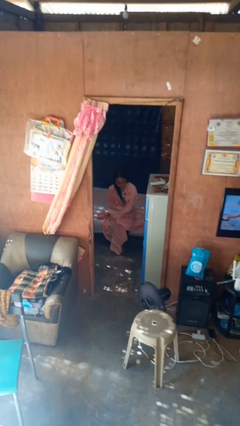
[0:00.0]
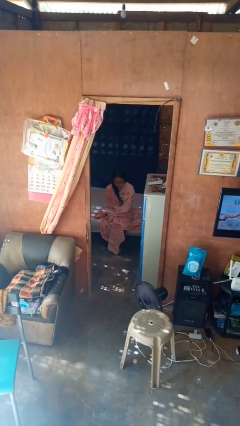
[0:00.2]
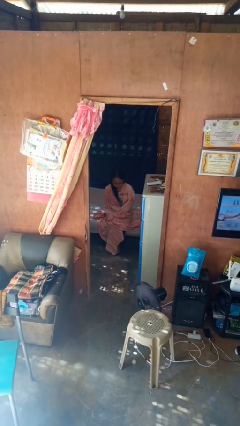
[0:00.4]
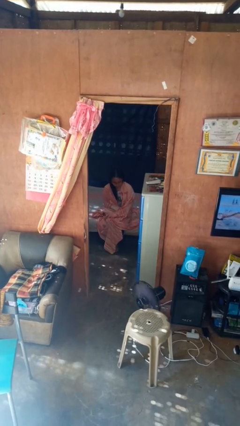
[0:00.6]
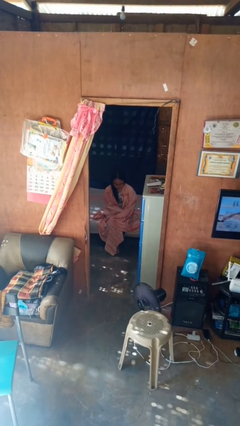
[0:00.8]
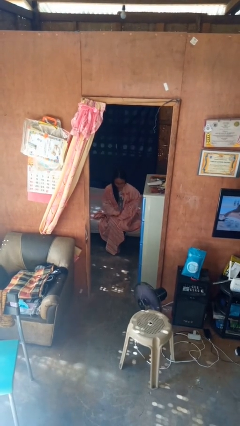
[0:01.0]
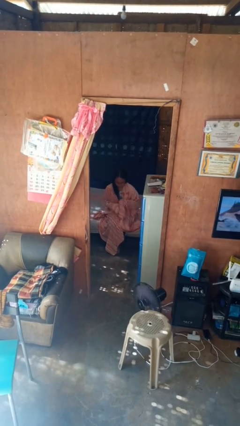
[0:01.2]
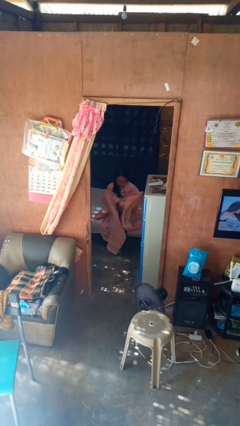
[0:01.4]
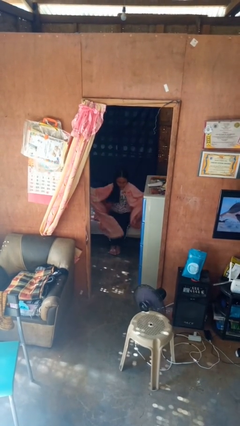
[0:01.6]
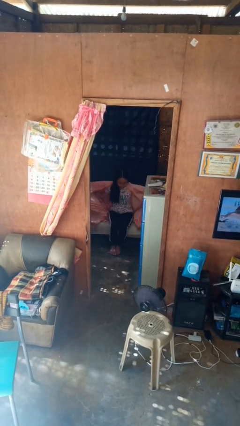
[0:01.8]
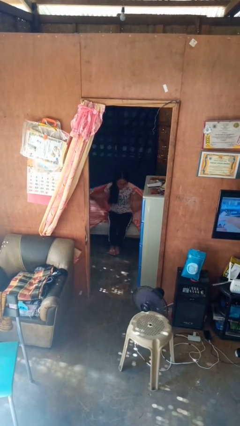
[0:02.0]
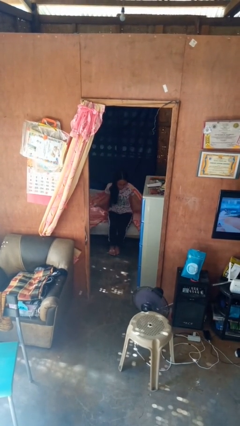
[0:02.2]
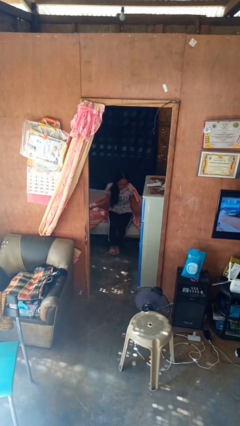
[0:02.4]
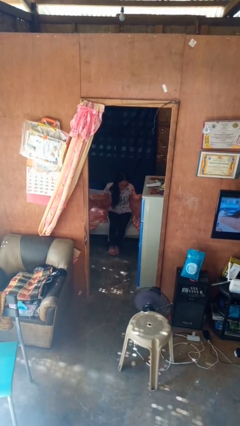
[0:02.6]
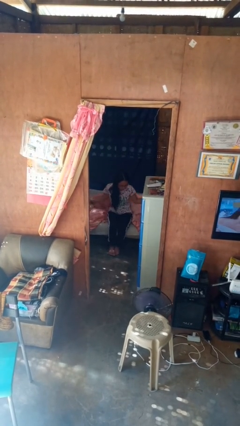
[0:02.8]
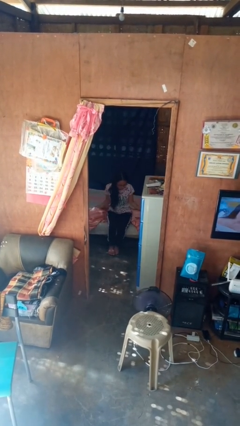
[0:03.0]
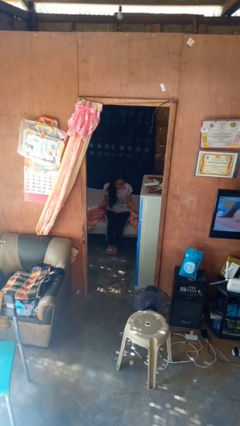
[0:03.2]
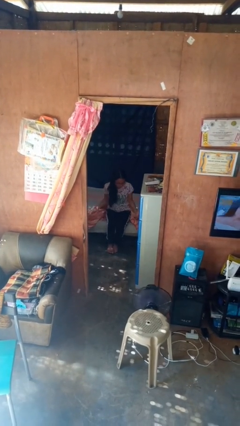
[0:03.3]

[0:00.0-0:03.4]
person uncovers with blanket

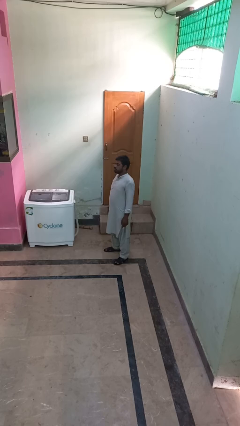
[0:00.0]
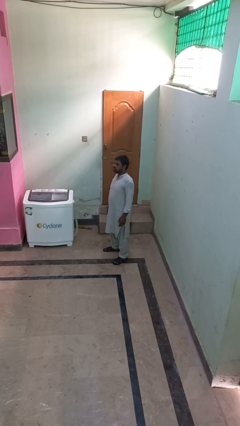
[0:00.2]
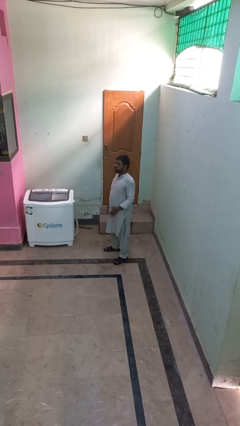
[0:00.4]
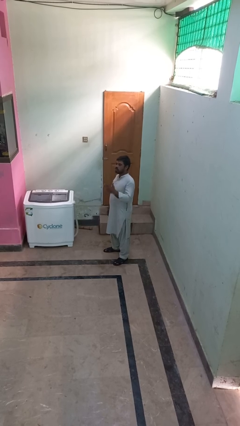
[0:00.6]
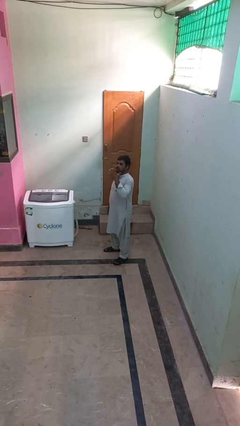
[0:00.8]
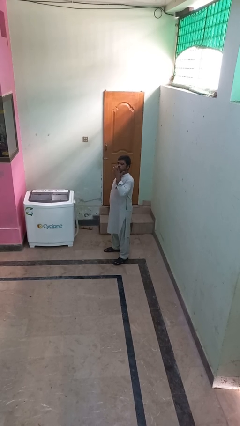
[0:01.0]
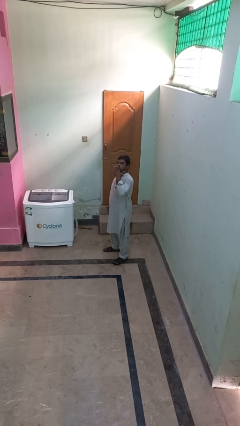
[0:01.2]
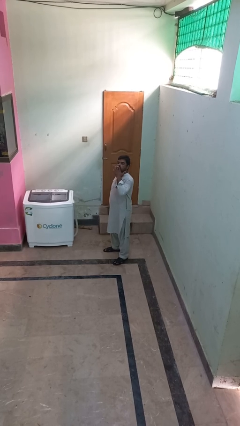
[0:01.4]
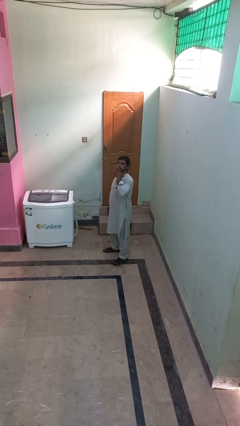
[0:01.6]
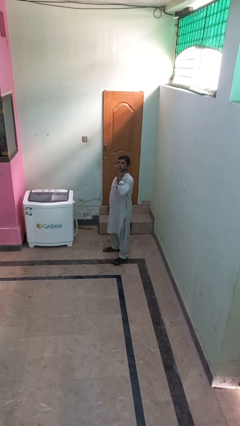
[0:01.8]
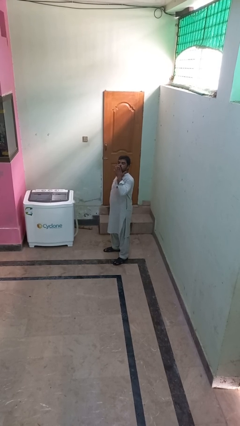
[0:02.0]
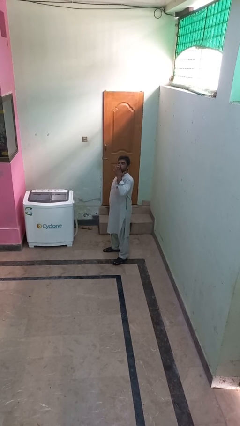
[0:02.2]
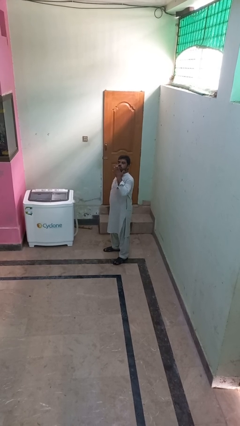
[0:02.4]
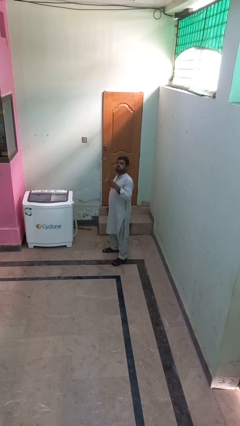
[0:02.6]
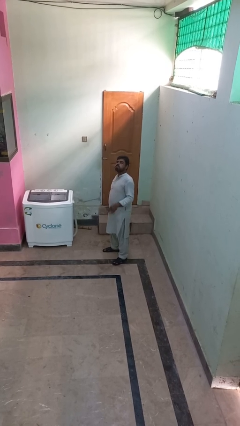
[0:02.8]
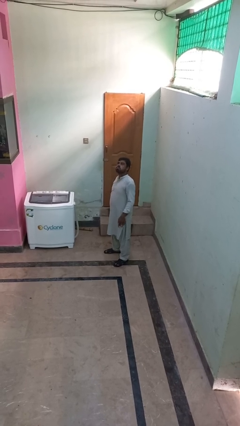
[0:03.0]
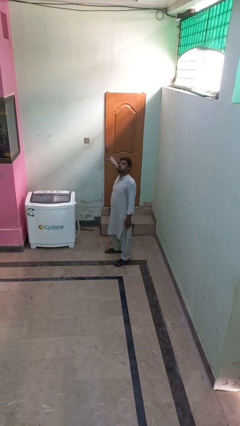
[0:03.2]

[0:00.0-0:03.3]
person vapes

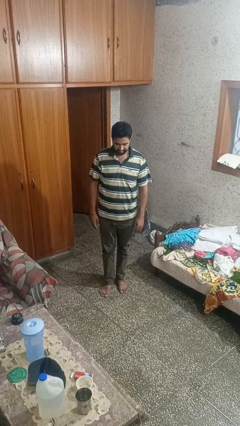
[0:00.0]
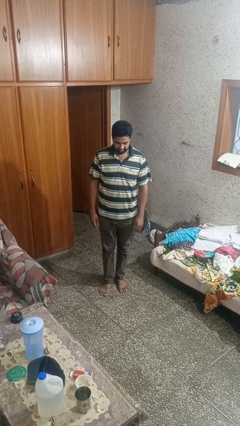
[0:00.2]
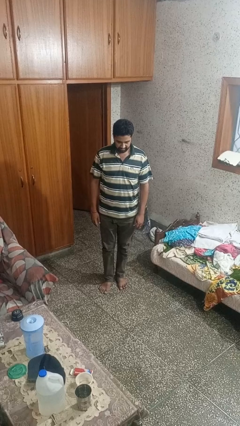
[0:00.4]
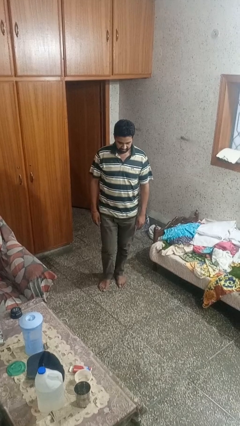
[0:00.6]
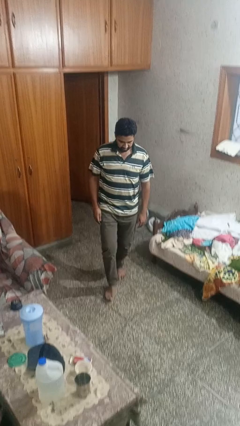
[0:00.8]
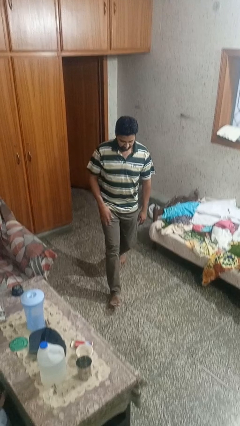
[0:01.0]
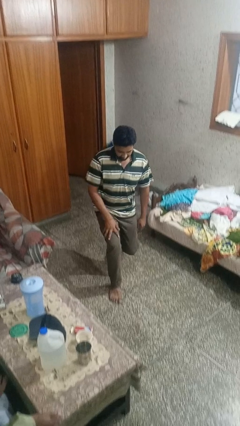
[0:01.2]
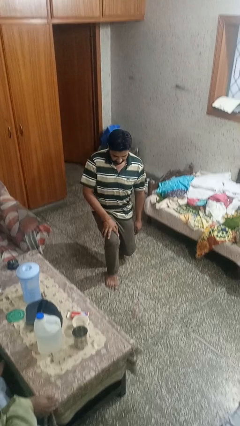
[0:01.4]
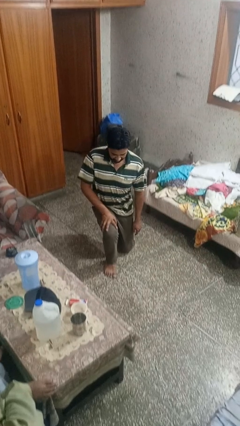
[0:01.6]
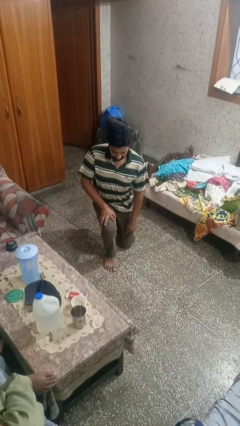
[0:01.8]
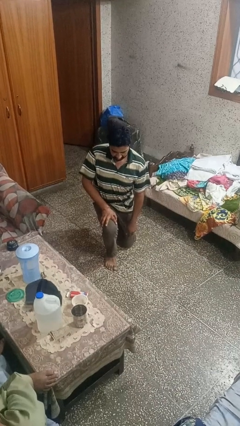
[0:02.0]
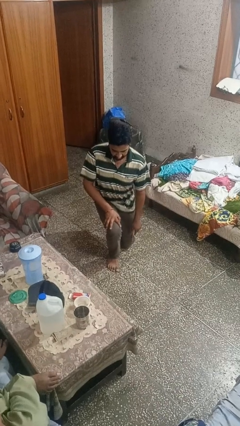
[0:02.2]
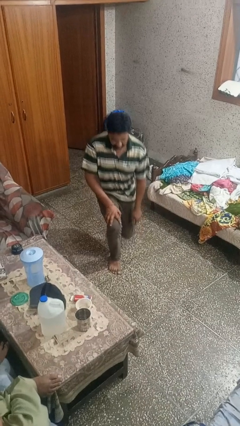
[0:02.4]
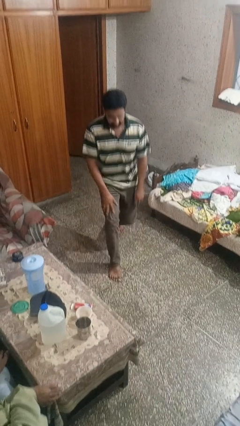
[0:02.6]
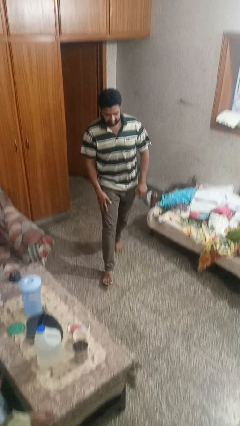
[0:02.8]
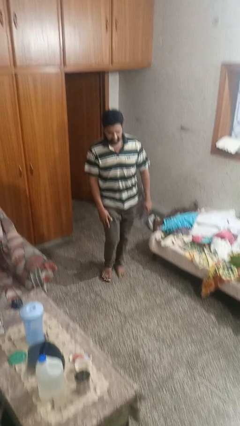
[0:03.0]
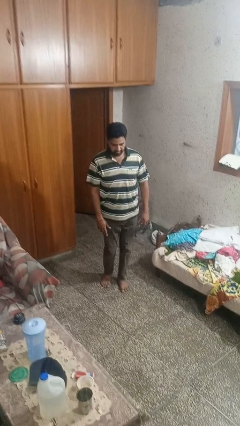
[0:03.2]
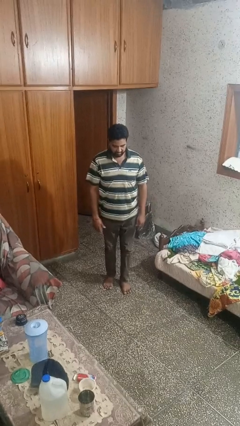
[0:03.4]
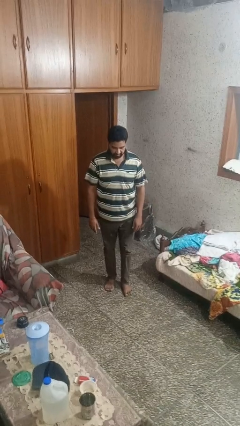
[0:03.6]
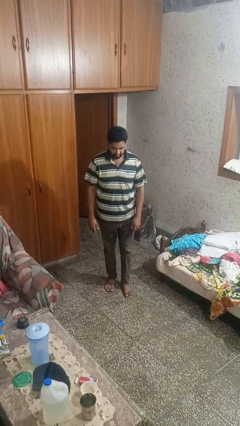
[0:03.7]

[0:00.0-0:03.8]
person exercises with lunges

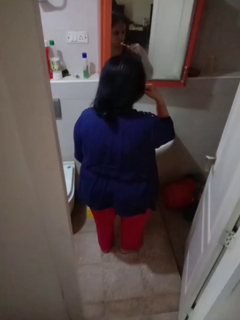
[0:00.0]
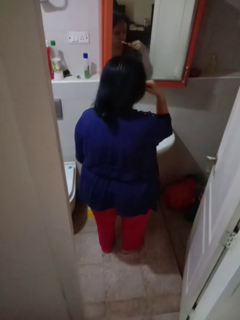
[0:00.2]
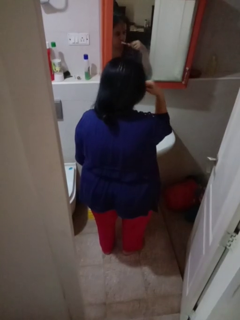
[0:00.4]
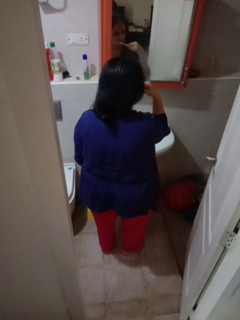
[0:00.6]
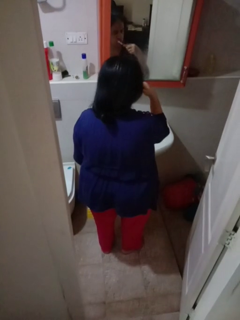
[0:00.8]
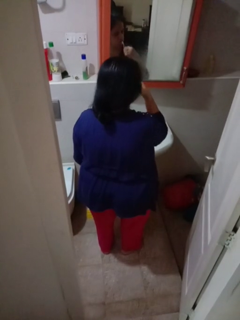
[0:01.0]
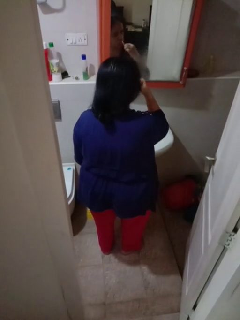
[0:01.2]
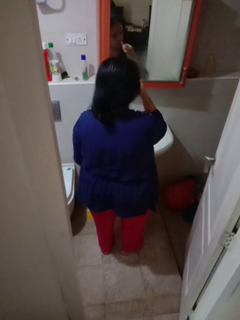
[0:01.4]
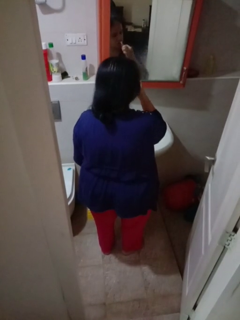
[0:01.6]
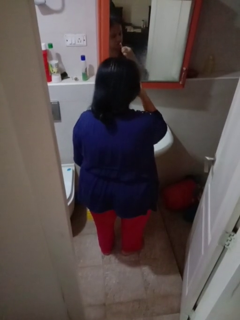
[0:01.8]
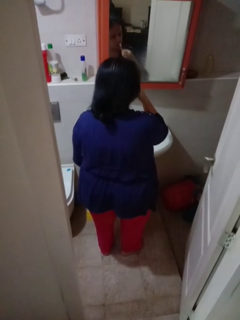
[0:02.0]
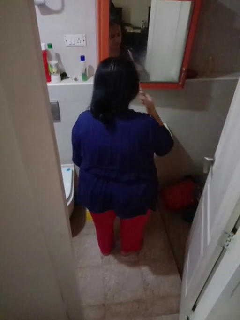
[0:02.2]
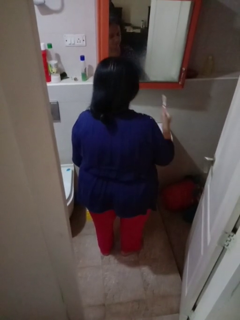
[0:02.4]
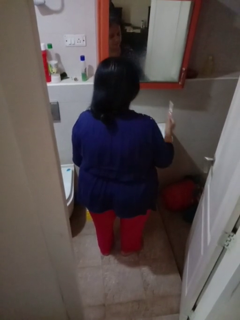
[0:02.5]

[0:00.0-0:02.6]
person brushes teeth

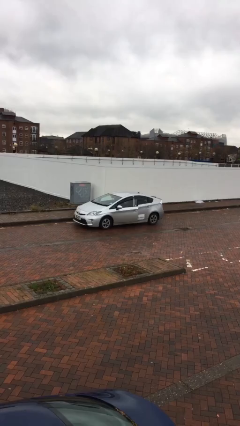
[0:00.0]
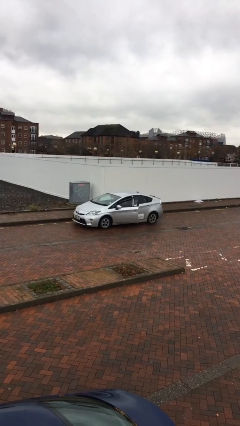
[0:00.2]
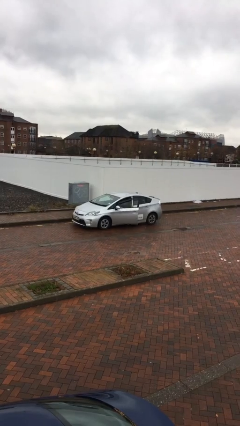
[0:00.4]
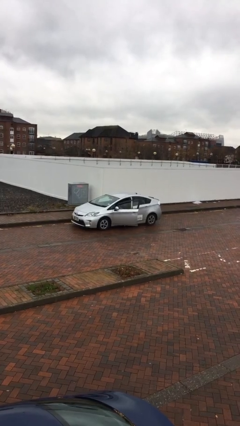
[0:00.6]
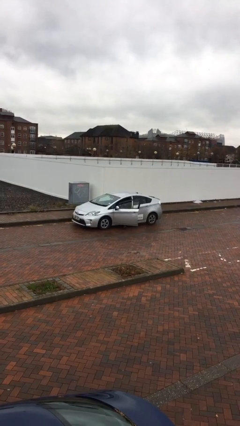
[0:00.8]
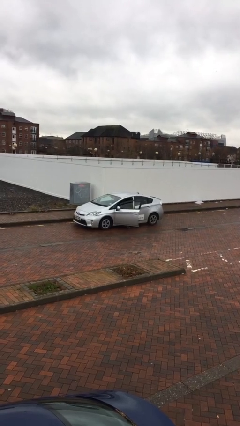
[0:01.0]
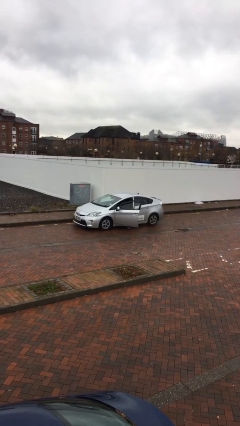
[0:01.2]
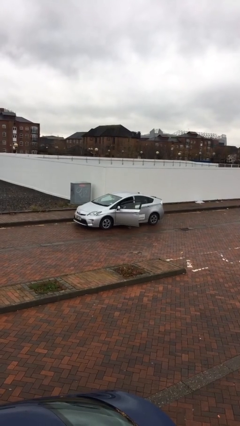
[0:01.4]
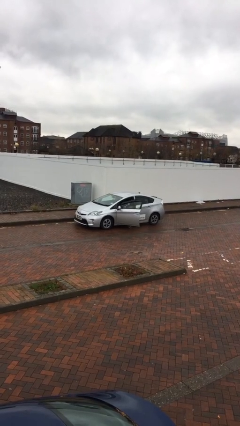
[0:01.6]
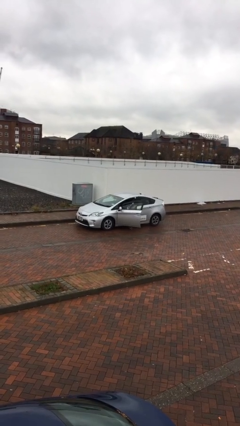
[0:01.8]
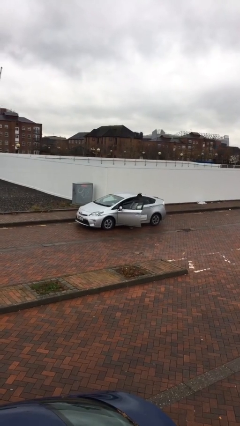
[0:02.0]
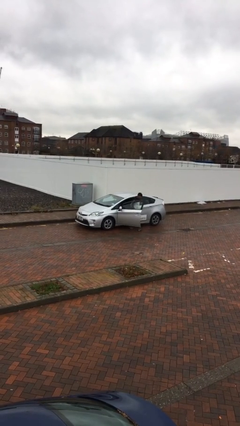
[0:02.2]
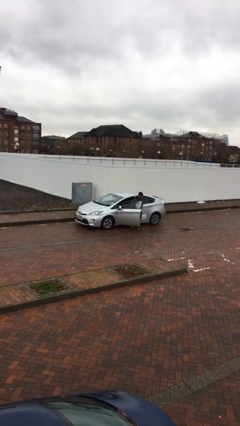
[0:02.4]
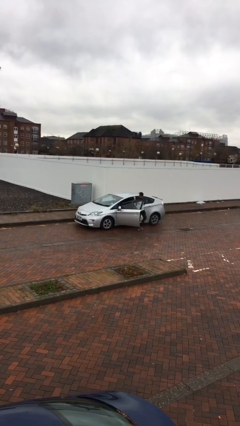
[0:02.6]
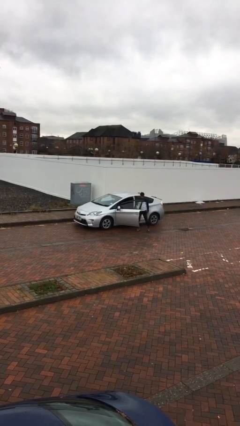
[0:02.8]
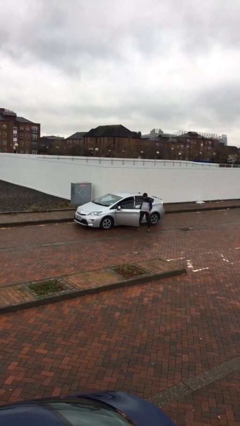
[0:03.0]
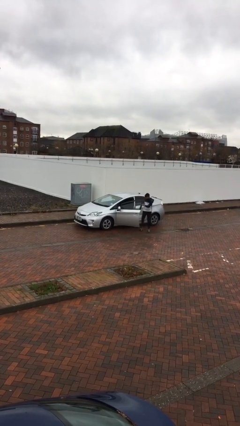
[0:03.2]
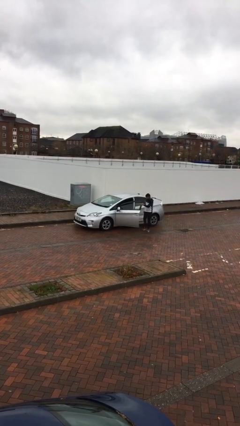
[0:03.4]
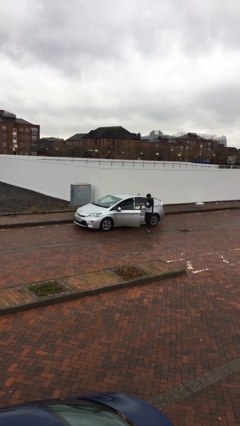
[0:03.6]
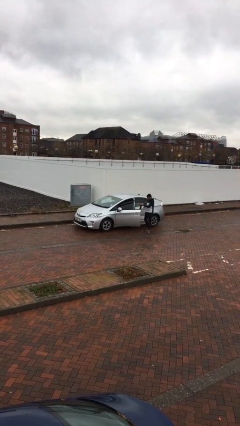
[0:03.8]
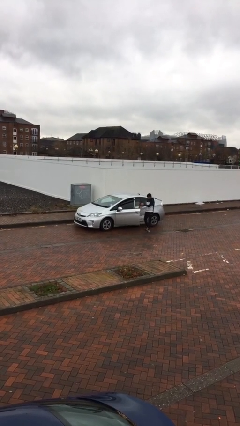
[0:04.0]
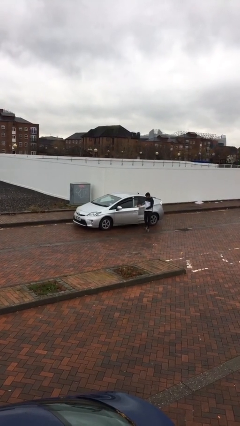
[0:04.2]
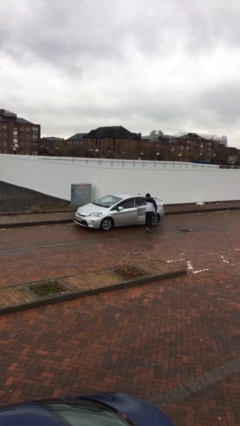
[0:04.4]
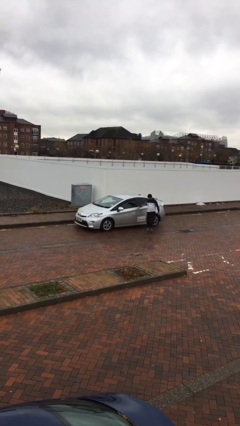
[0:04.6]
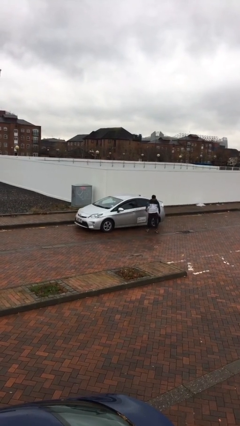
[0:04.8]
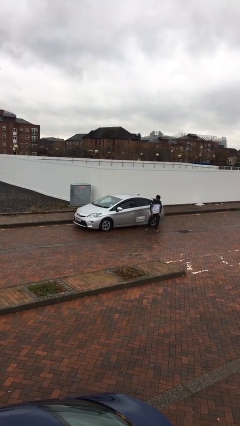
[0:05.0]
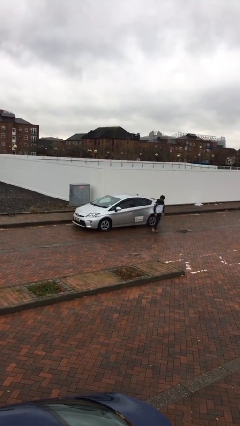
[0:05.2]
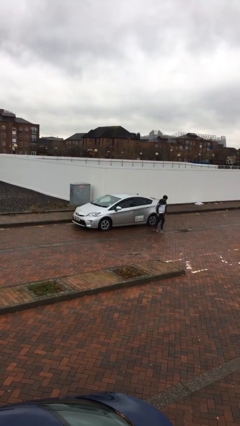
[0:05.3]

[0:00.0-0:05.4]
car drops off person

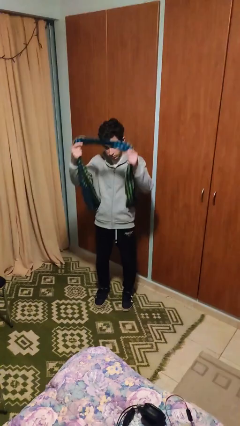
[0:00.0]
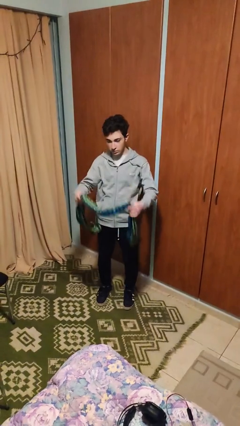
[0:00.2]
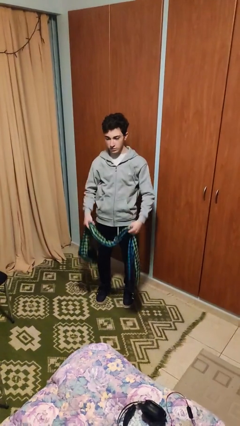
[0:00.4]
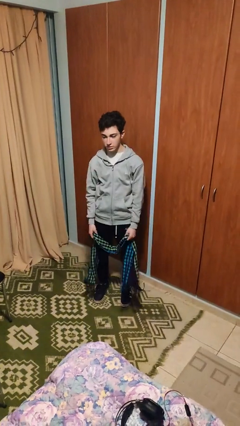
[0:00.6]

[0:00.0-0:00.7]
person takes off scarf
